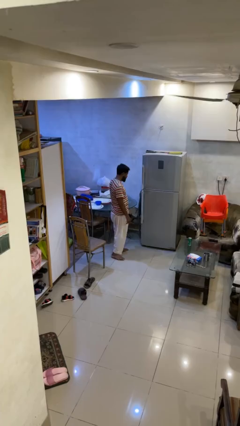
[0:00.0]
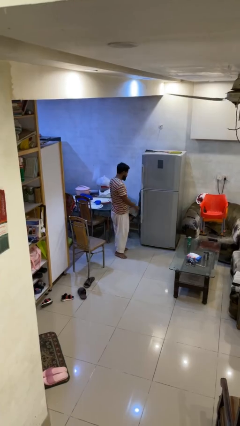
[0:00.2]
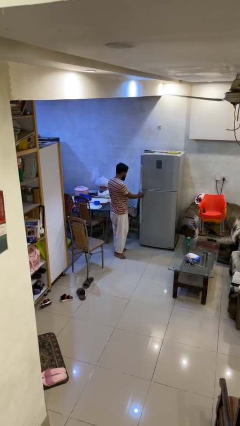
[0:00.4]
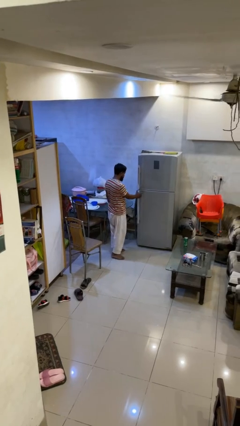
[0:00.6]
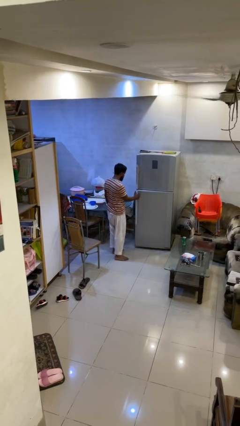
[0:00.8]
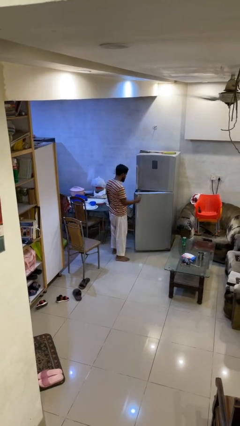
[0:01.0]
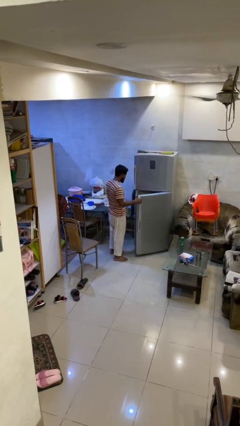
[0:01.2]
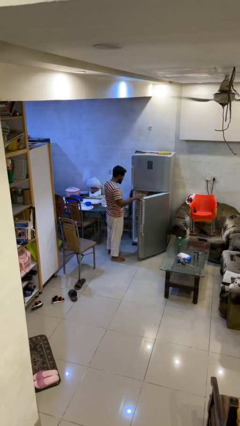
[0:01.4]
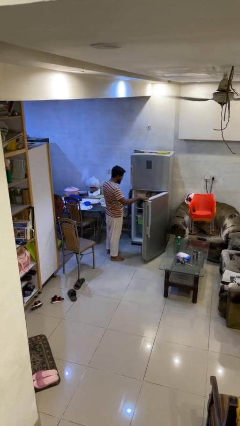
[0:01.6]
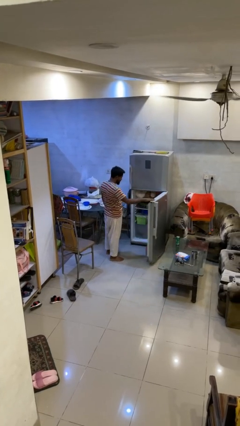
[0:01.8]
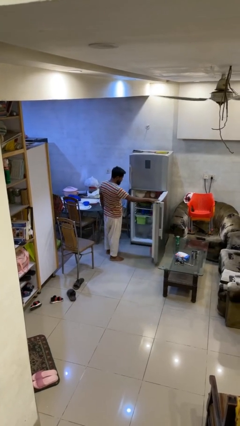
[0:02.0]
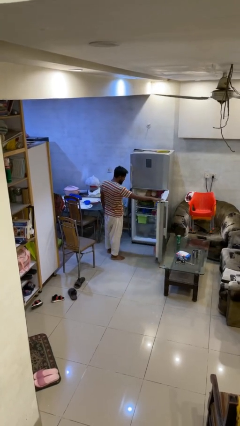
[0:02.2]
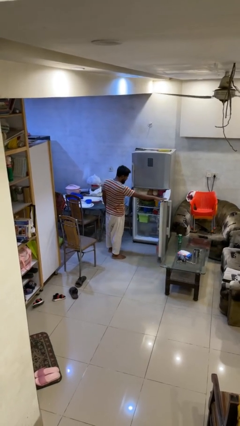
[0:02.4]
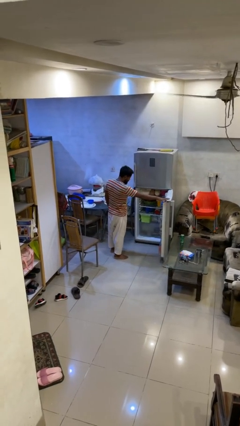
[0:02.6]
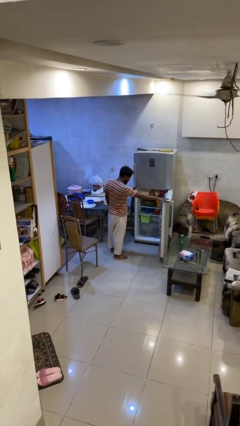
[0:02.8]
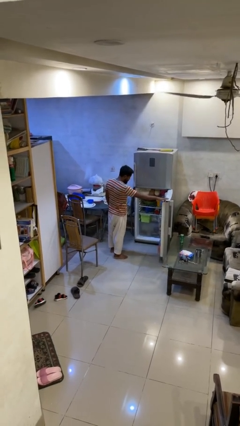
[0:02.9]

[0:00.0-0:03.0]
person opens refrigerator

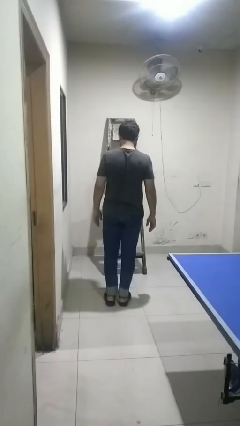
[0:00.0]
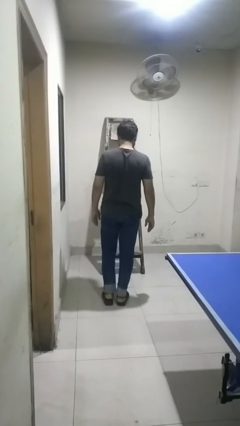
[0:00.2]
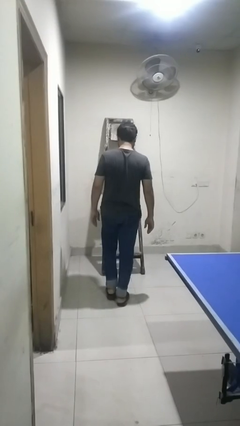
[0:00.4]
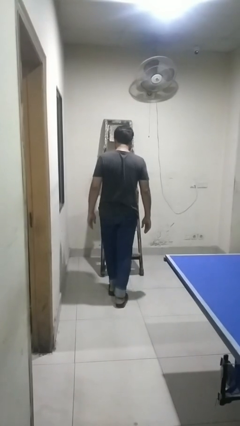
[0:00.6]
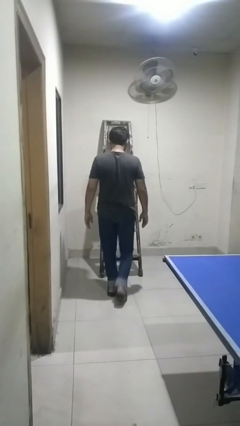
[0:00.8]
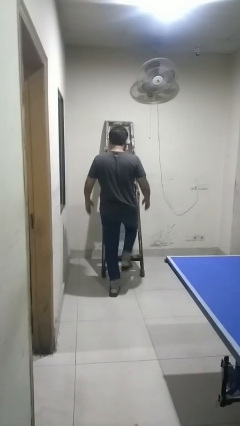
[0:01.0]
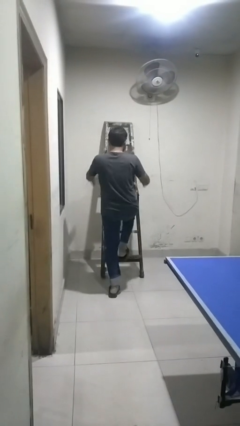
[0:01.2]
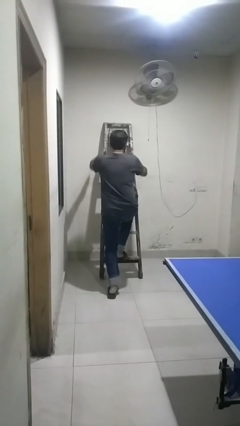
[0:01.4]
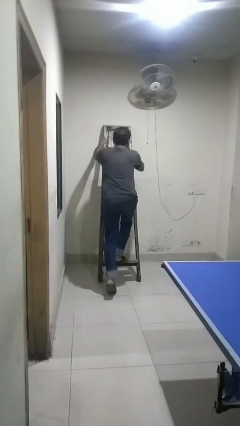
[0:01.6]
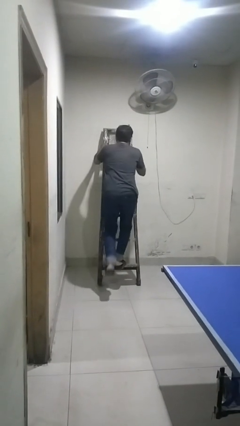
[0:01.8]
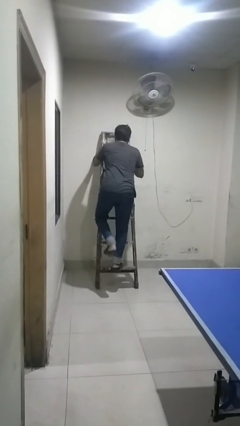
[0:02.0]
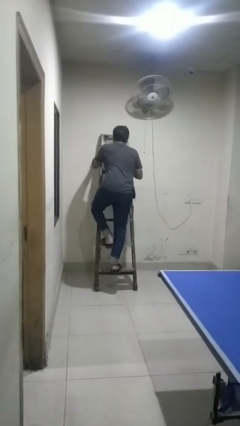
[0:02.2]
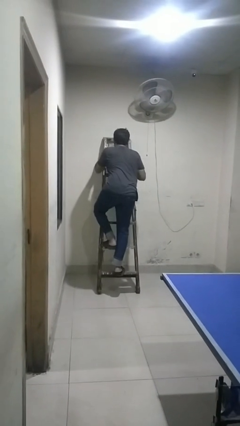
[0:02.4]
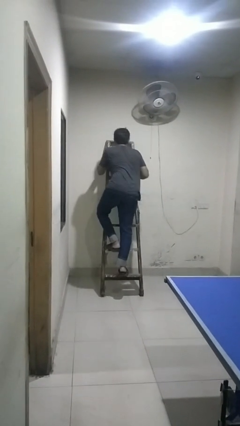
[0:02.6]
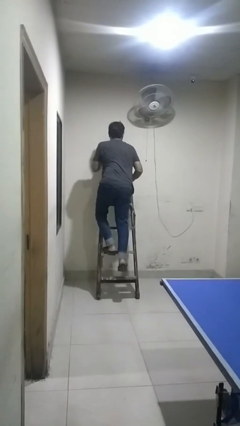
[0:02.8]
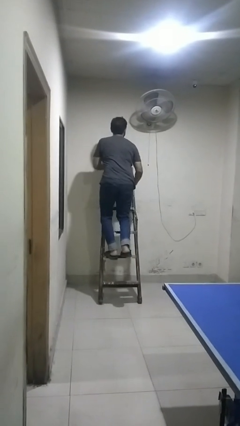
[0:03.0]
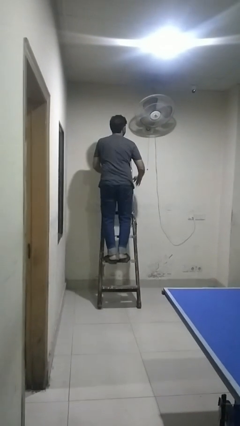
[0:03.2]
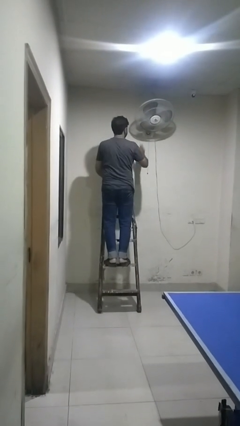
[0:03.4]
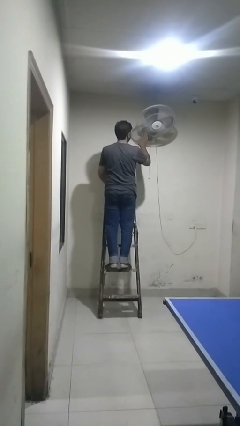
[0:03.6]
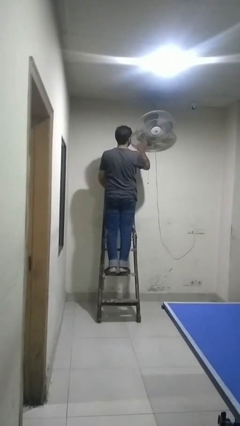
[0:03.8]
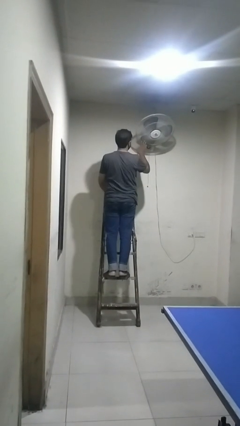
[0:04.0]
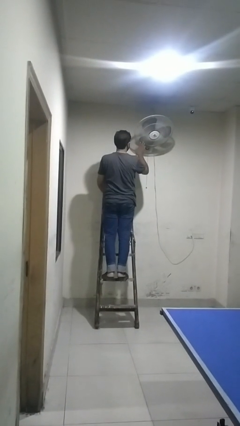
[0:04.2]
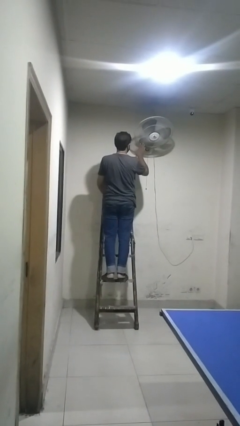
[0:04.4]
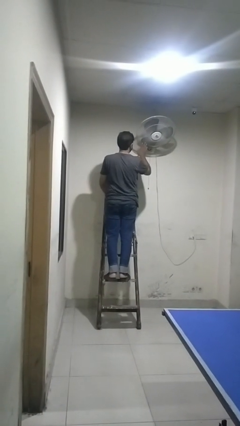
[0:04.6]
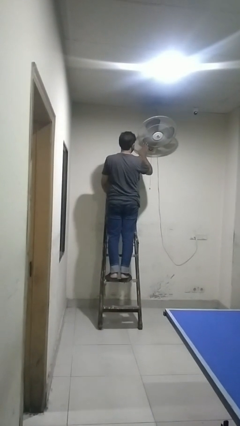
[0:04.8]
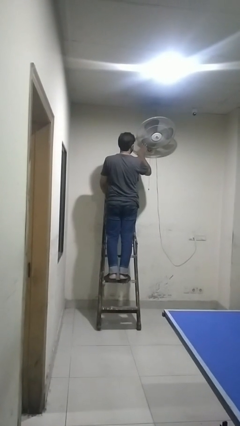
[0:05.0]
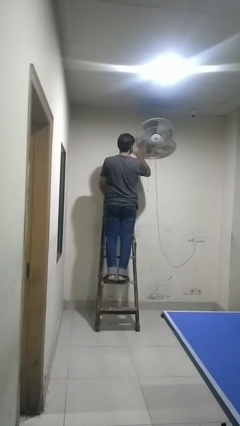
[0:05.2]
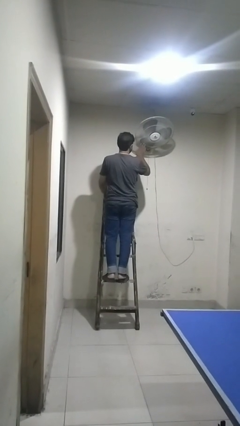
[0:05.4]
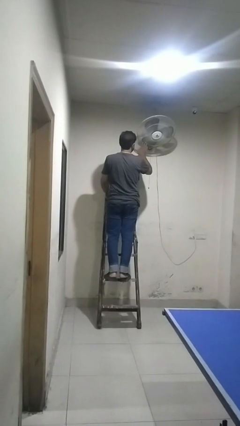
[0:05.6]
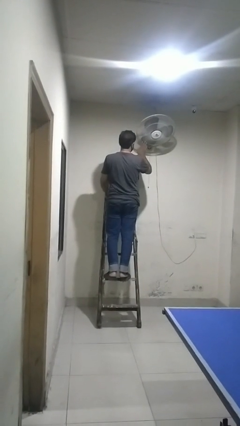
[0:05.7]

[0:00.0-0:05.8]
person climbs up ladder

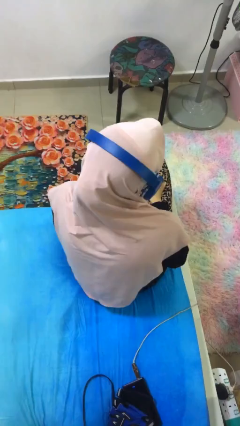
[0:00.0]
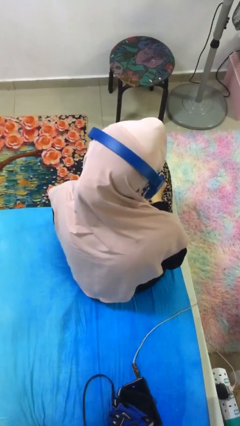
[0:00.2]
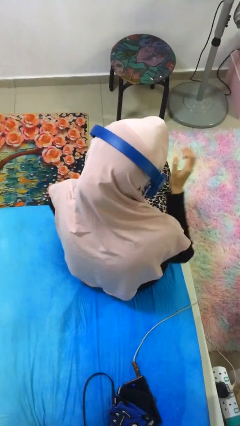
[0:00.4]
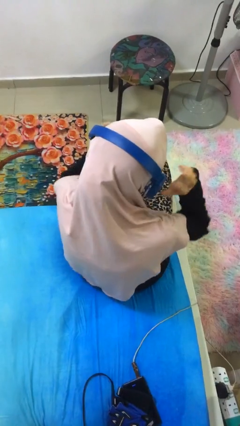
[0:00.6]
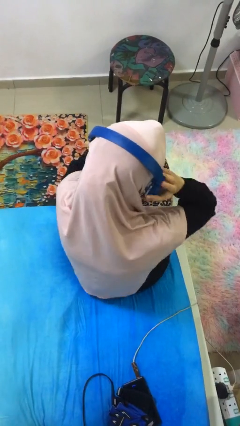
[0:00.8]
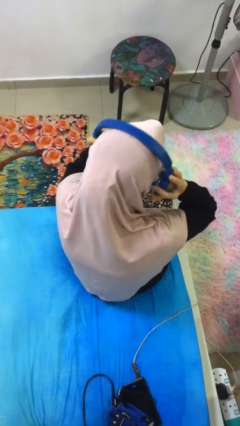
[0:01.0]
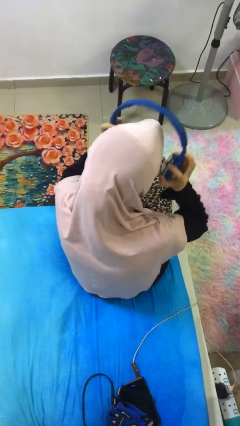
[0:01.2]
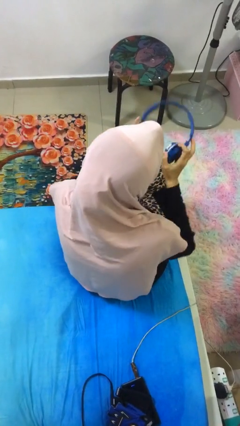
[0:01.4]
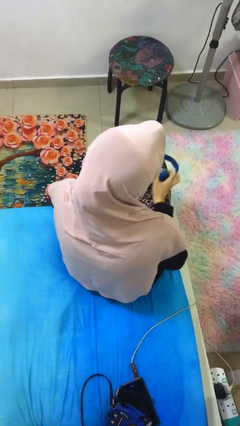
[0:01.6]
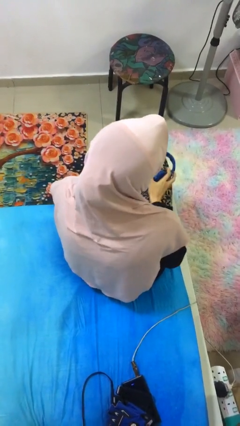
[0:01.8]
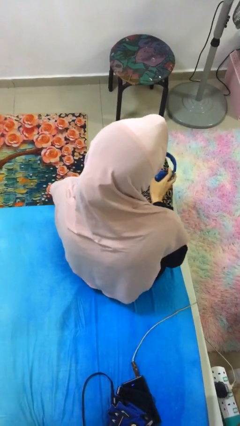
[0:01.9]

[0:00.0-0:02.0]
person takes off headphones

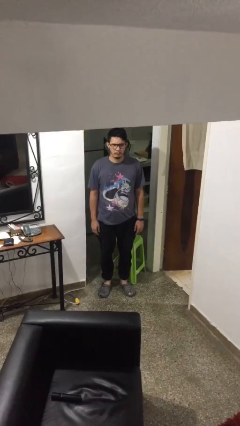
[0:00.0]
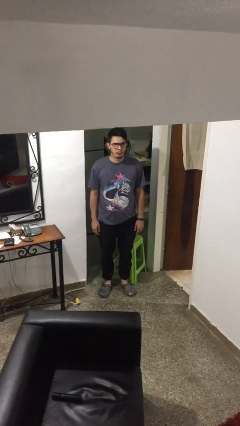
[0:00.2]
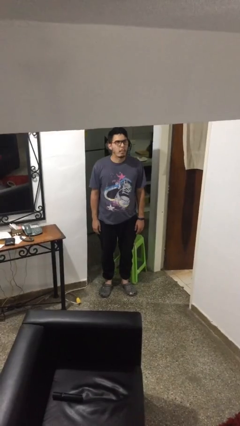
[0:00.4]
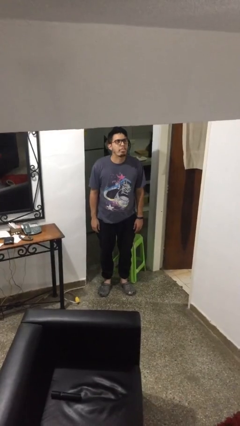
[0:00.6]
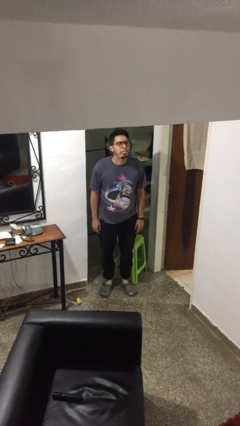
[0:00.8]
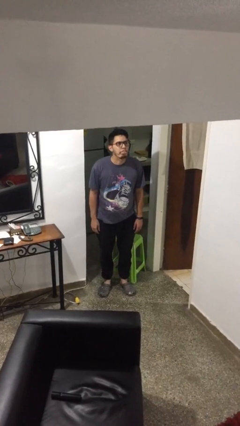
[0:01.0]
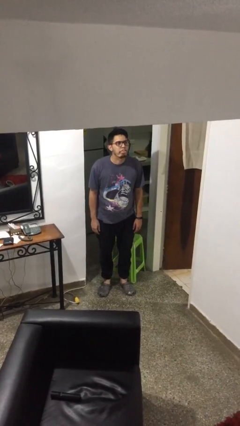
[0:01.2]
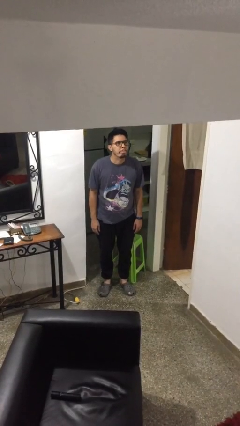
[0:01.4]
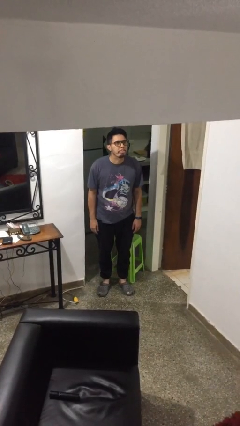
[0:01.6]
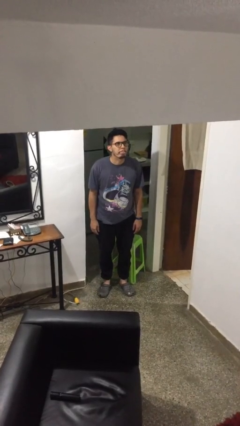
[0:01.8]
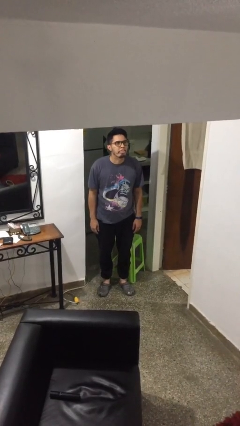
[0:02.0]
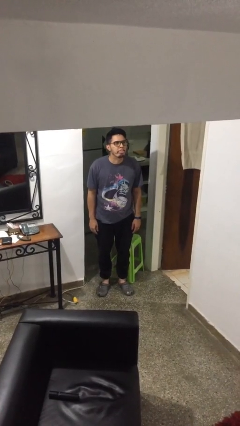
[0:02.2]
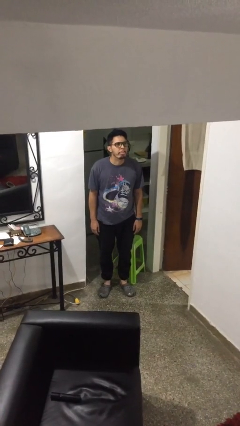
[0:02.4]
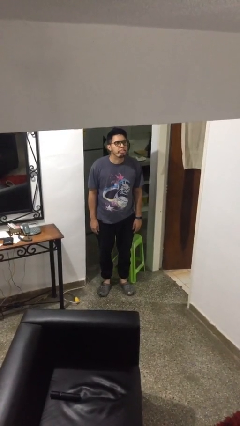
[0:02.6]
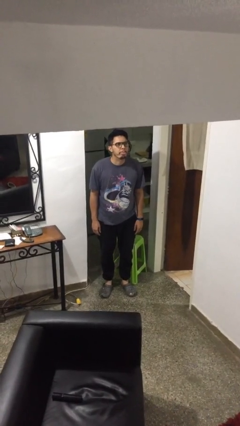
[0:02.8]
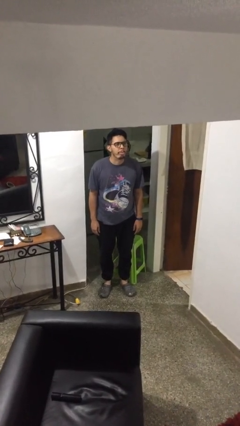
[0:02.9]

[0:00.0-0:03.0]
person sticks out tongue

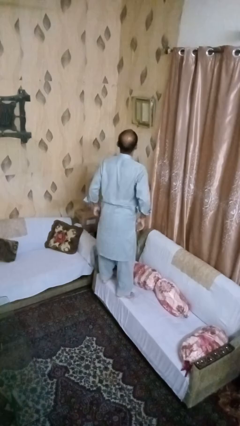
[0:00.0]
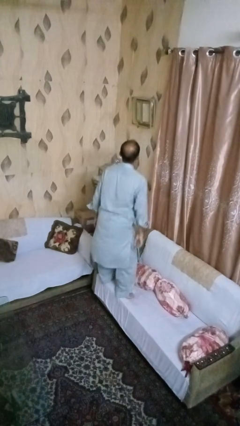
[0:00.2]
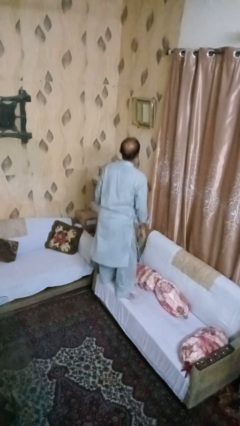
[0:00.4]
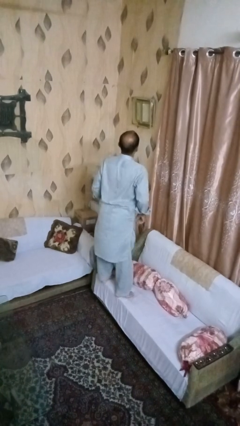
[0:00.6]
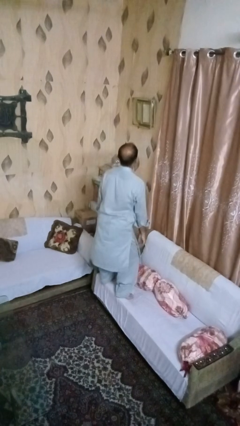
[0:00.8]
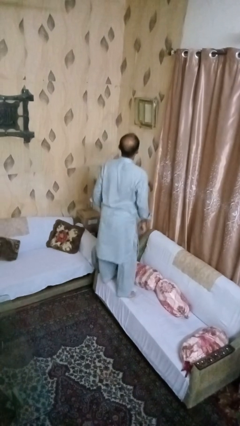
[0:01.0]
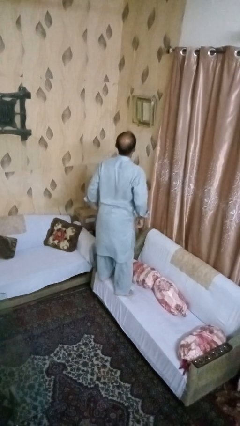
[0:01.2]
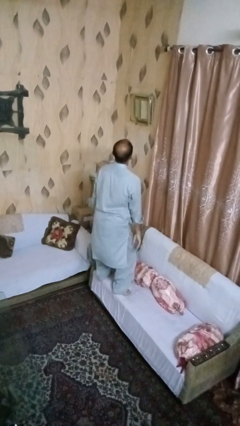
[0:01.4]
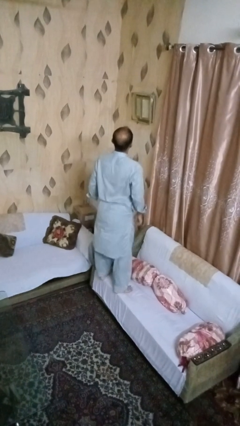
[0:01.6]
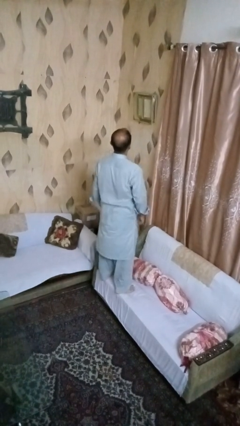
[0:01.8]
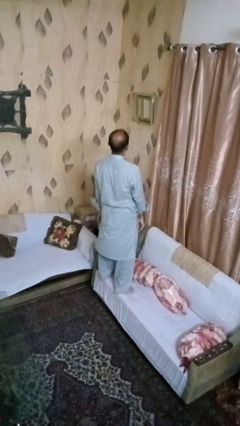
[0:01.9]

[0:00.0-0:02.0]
person jumps on couch

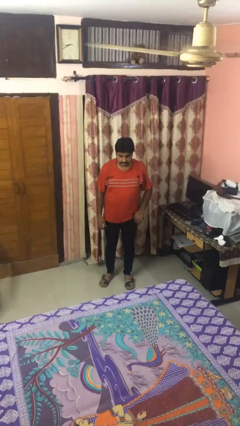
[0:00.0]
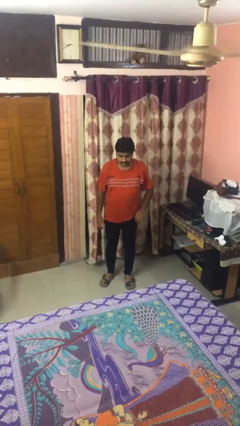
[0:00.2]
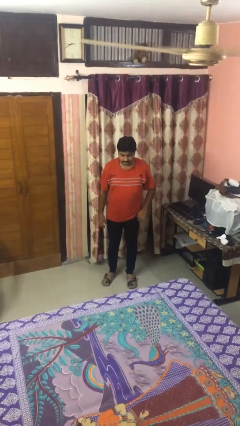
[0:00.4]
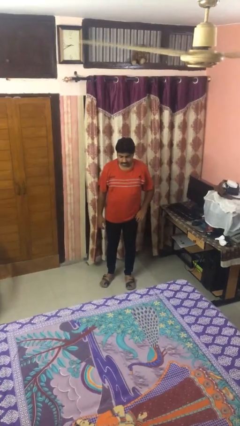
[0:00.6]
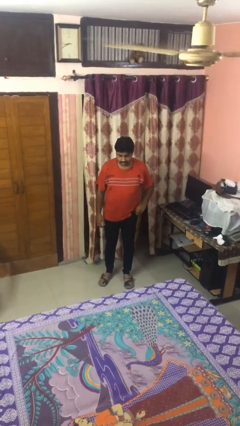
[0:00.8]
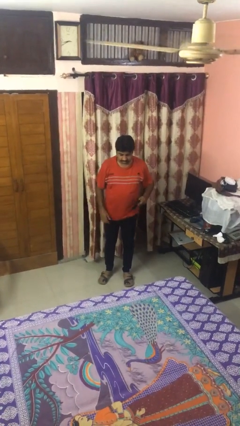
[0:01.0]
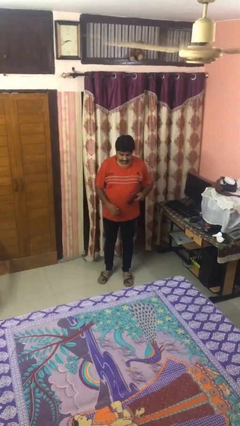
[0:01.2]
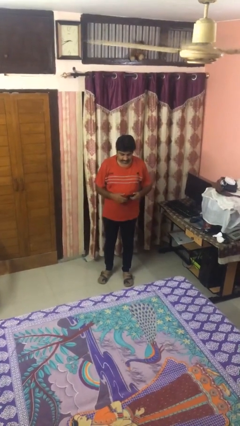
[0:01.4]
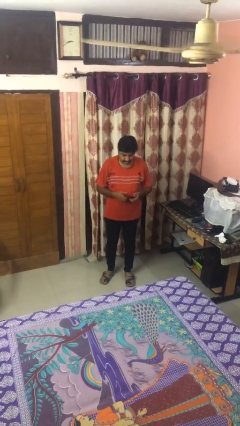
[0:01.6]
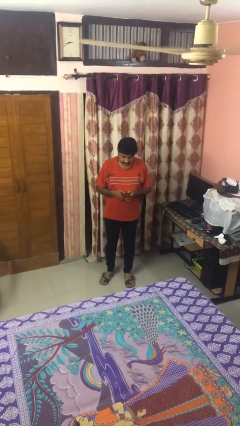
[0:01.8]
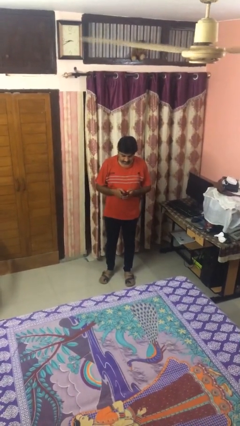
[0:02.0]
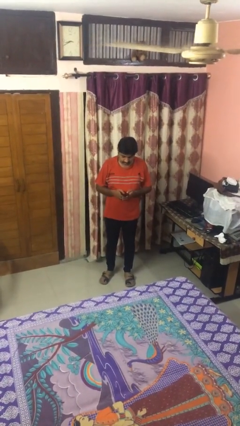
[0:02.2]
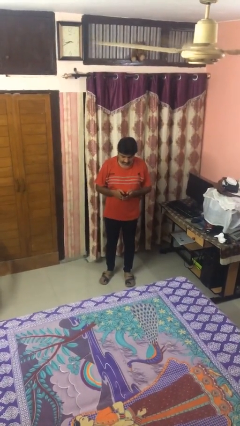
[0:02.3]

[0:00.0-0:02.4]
person takes phone from pocket
